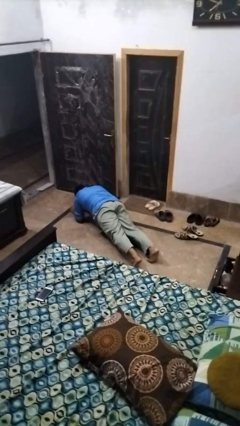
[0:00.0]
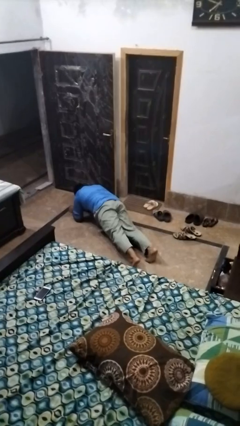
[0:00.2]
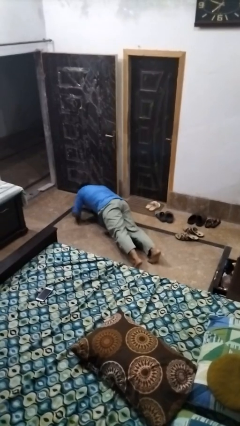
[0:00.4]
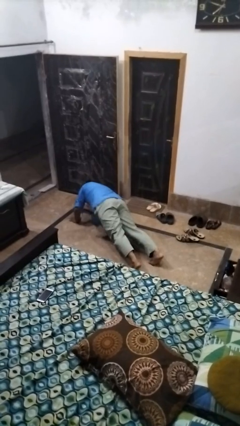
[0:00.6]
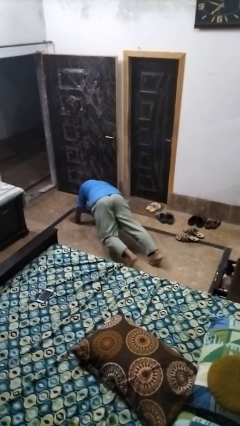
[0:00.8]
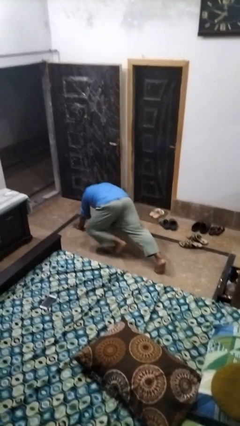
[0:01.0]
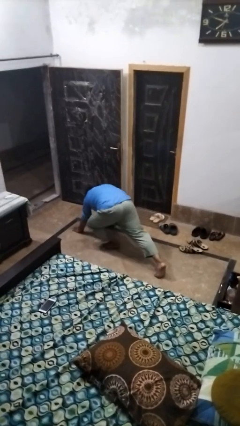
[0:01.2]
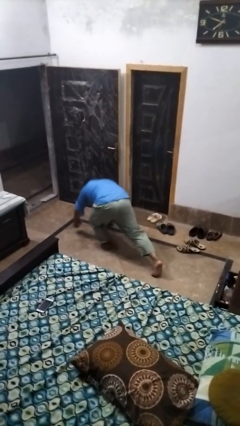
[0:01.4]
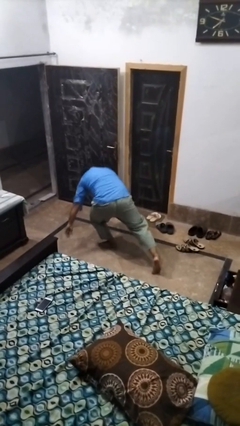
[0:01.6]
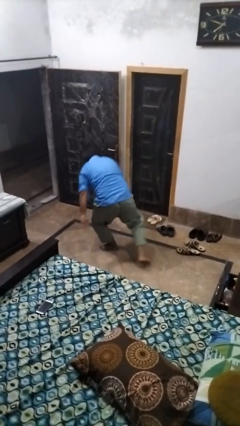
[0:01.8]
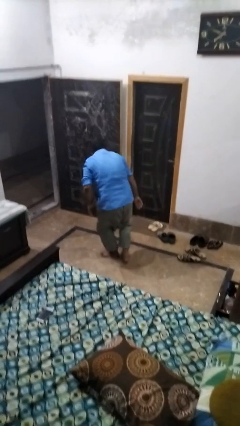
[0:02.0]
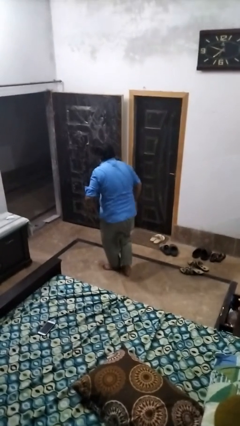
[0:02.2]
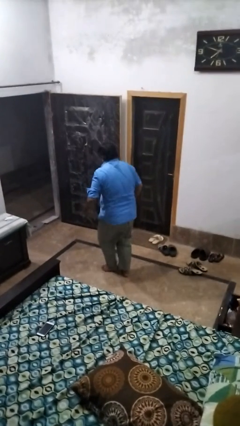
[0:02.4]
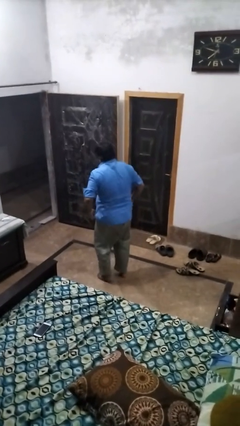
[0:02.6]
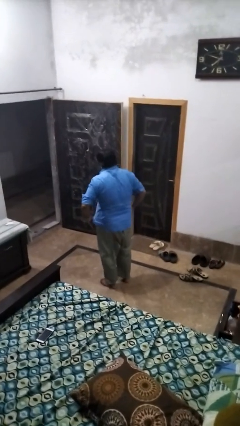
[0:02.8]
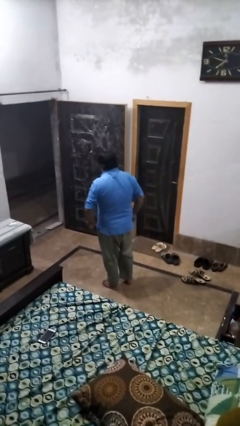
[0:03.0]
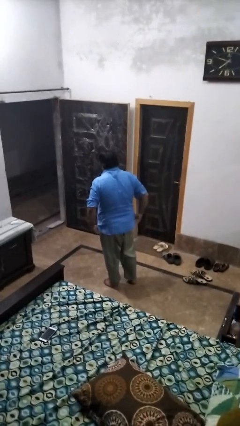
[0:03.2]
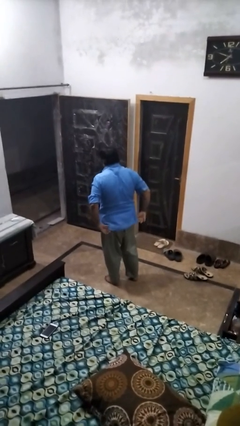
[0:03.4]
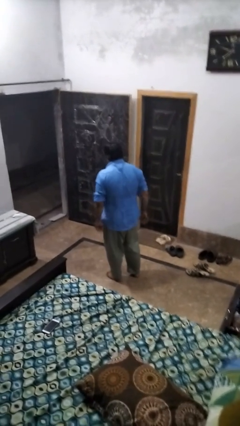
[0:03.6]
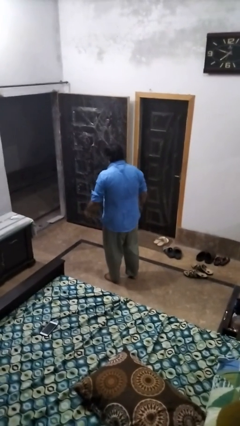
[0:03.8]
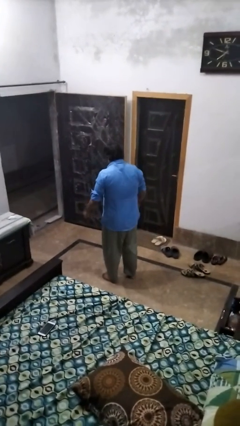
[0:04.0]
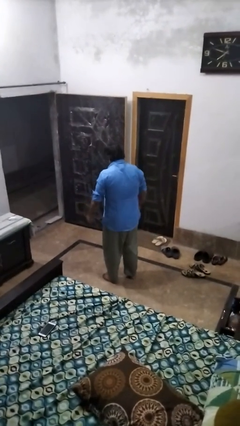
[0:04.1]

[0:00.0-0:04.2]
person stands up from floor

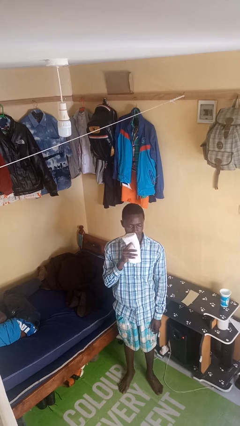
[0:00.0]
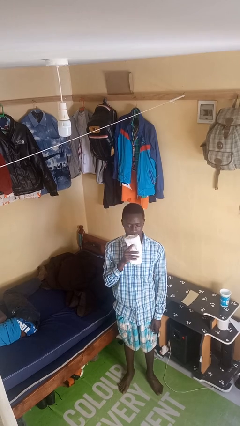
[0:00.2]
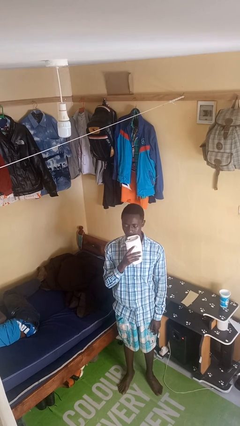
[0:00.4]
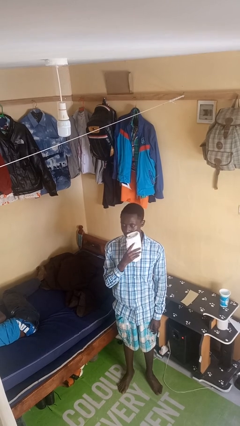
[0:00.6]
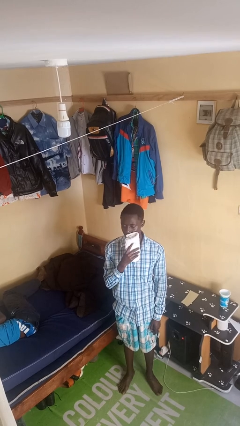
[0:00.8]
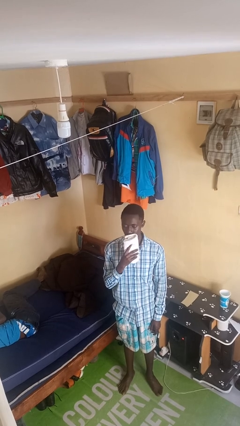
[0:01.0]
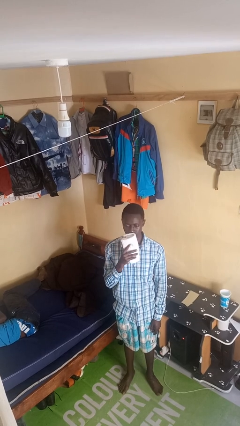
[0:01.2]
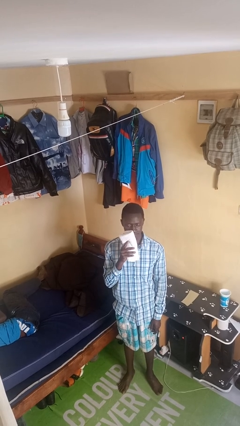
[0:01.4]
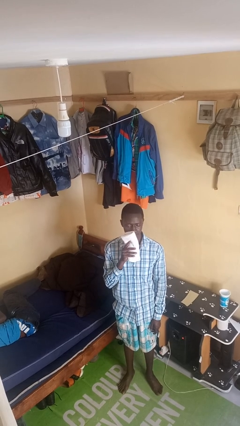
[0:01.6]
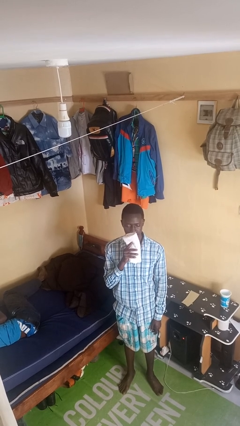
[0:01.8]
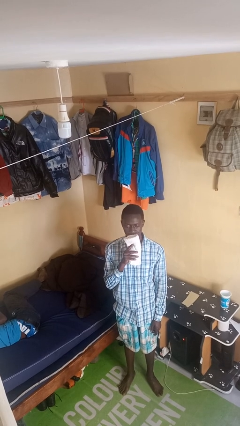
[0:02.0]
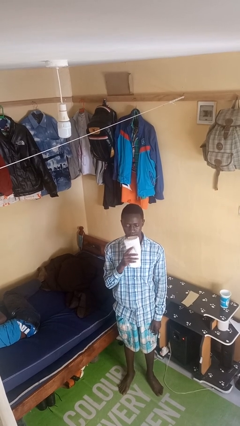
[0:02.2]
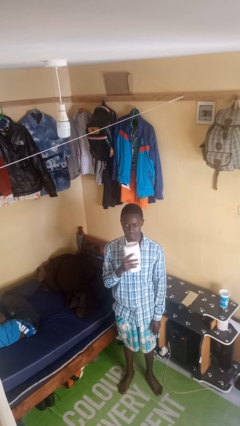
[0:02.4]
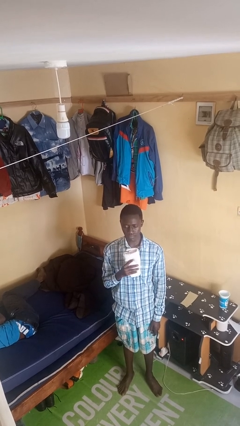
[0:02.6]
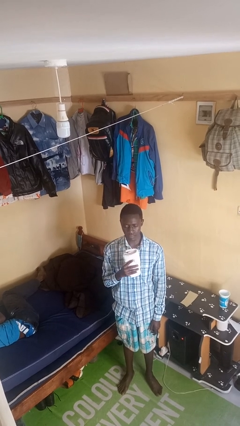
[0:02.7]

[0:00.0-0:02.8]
person wipes mouth with napkin

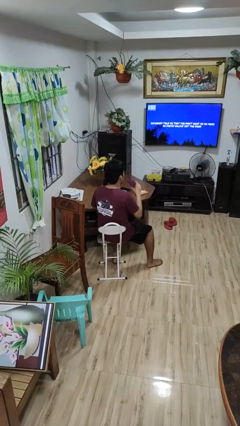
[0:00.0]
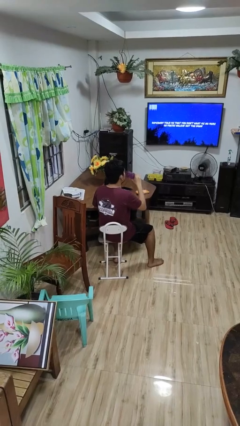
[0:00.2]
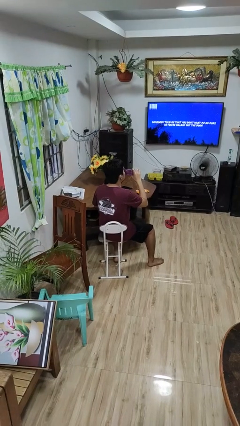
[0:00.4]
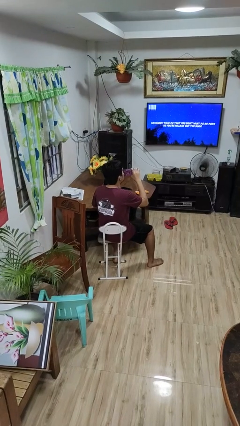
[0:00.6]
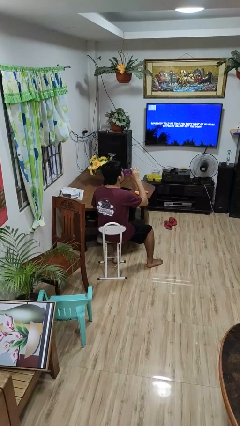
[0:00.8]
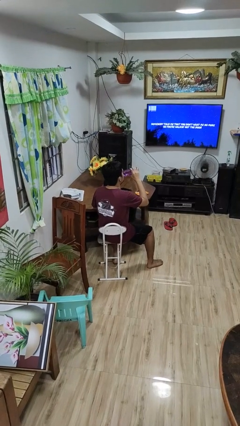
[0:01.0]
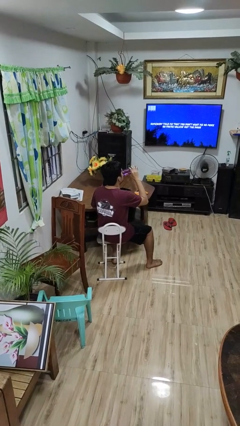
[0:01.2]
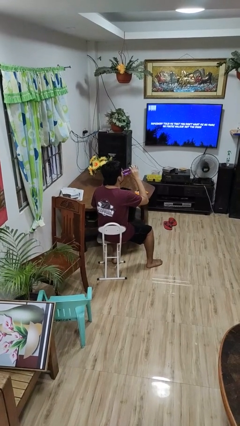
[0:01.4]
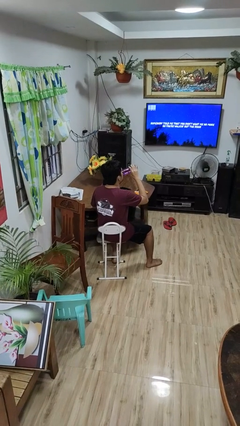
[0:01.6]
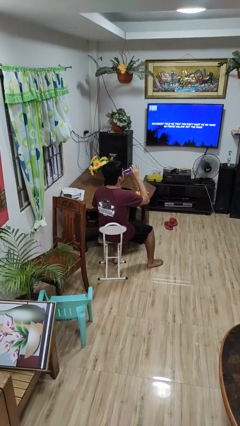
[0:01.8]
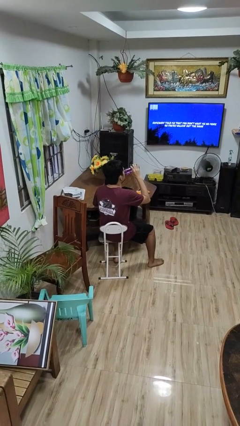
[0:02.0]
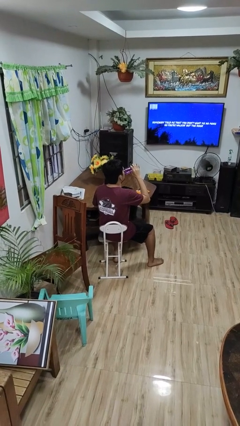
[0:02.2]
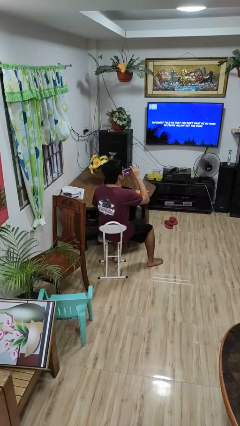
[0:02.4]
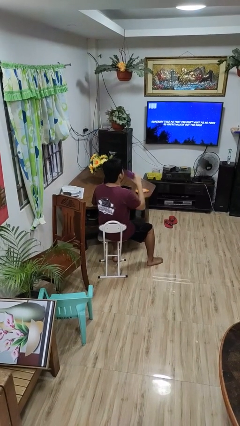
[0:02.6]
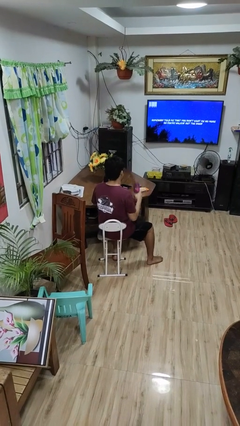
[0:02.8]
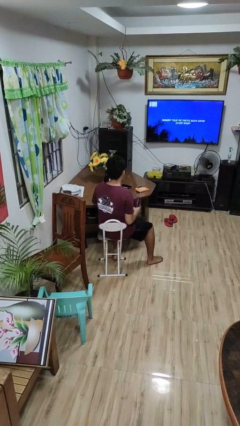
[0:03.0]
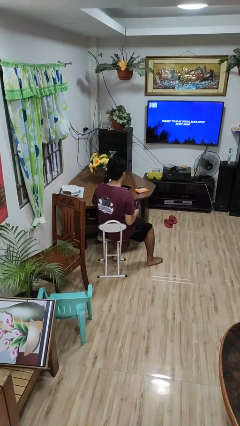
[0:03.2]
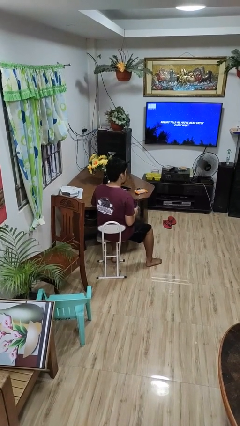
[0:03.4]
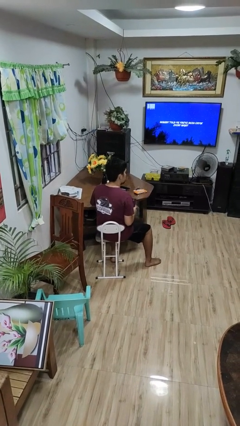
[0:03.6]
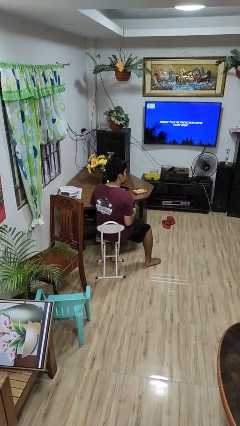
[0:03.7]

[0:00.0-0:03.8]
person drinks from bottle

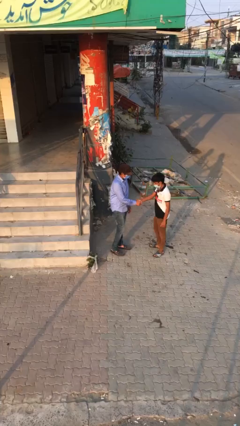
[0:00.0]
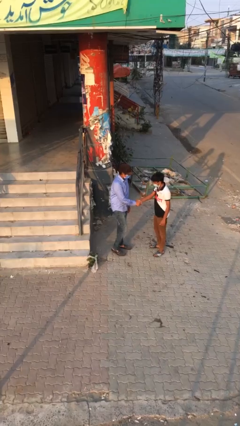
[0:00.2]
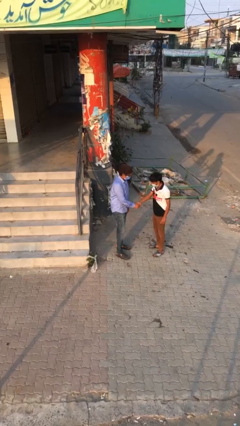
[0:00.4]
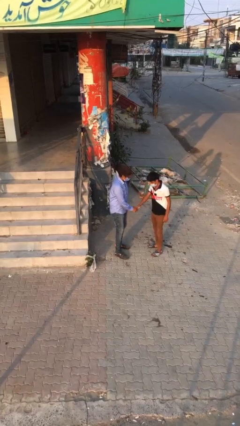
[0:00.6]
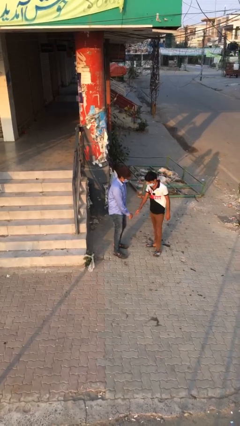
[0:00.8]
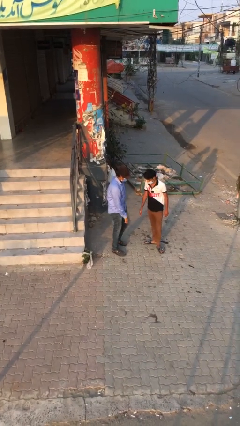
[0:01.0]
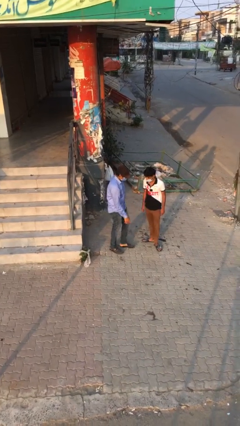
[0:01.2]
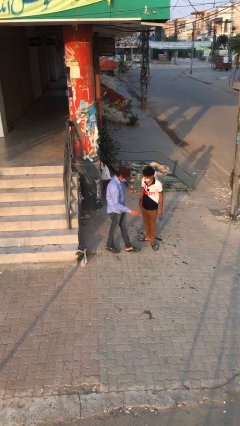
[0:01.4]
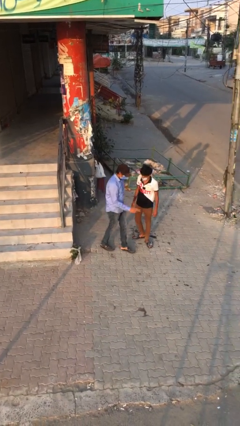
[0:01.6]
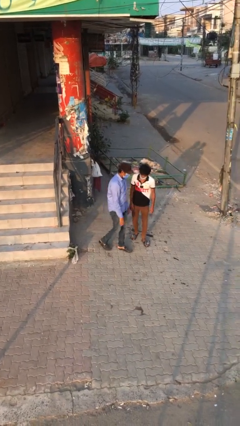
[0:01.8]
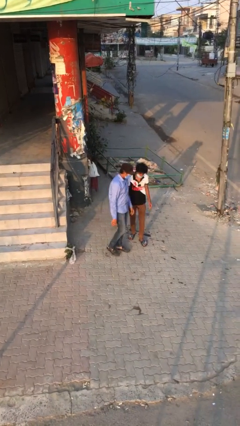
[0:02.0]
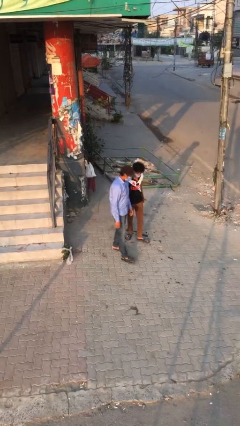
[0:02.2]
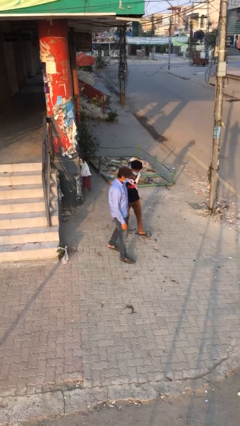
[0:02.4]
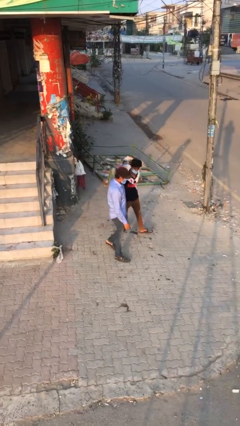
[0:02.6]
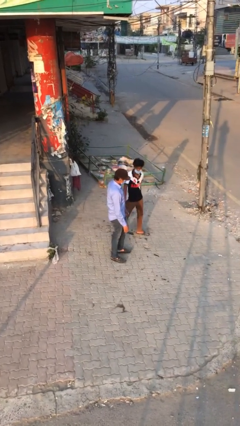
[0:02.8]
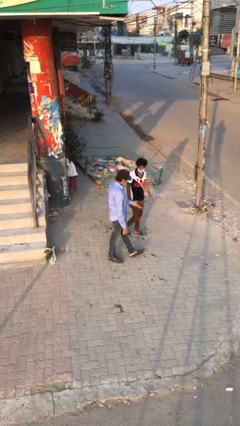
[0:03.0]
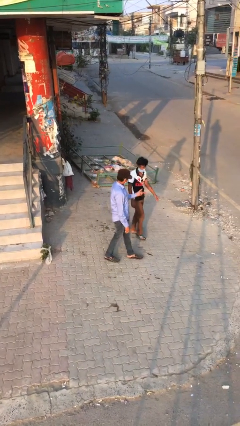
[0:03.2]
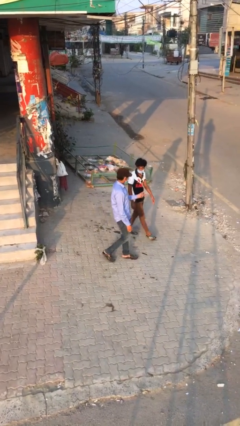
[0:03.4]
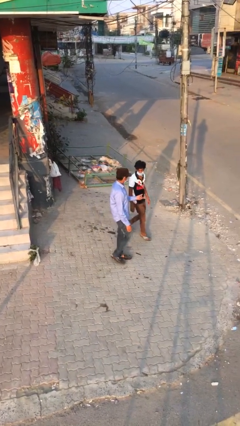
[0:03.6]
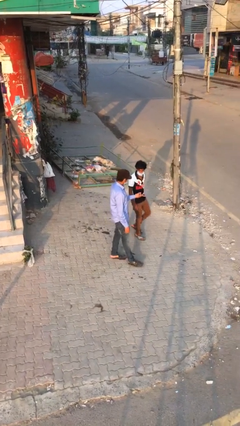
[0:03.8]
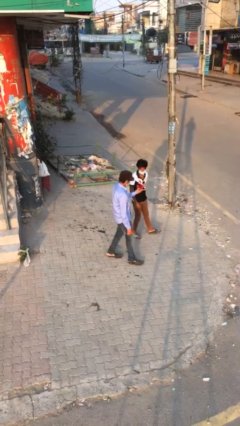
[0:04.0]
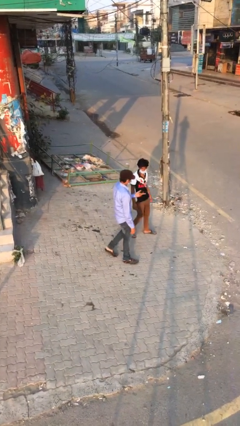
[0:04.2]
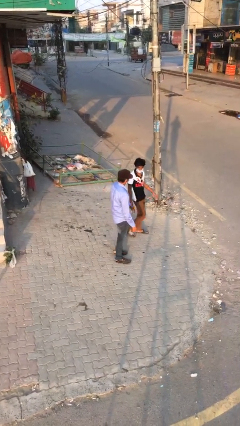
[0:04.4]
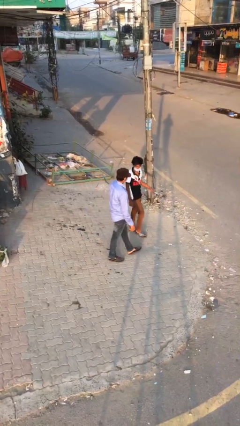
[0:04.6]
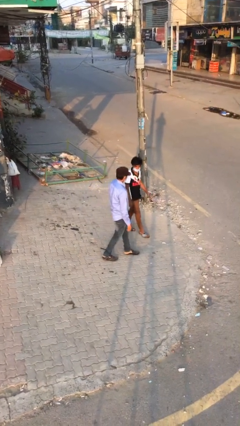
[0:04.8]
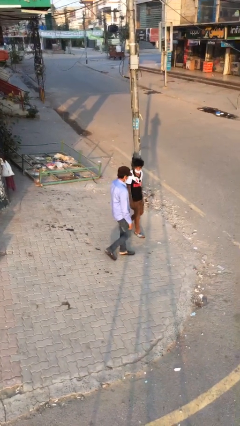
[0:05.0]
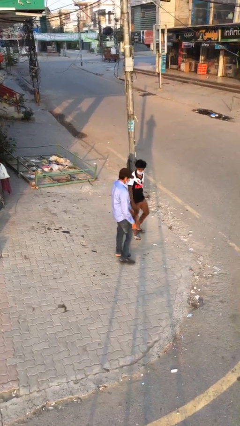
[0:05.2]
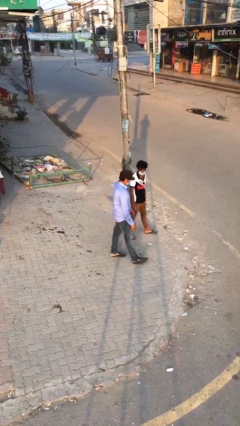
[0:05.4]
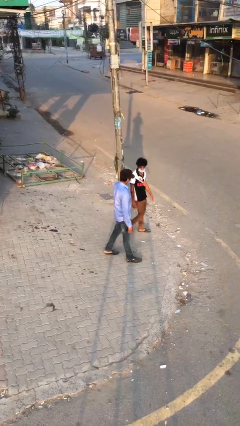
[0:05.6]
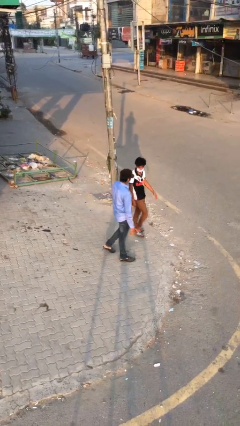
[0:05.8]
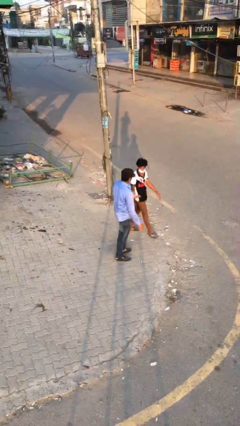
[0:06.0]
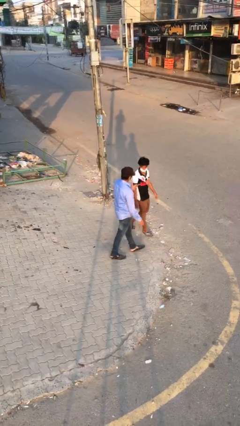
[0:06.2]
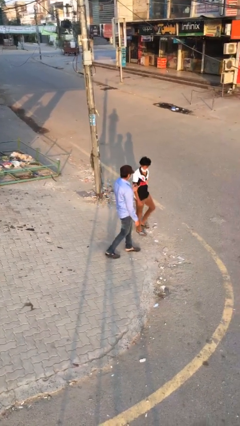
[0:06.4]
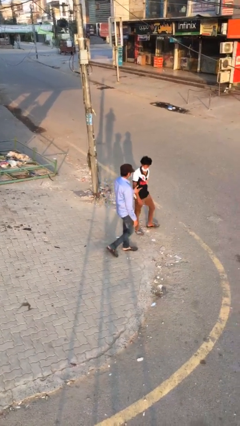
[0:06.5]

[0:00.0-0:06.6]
person talks to person

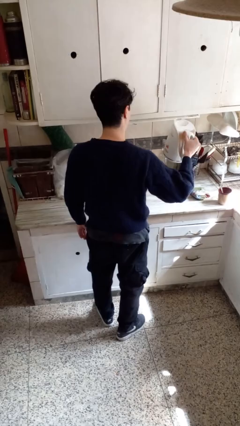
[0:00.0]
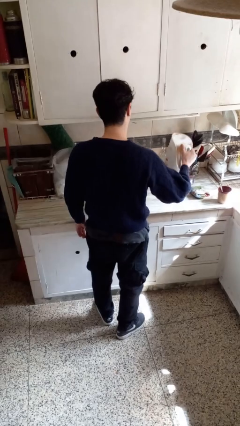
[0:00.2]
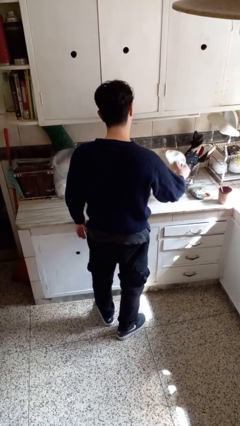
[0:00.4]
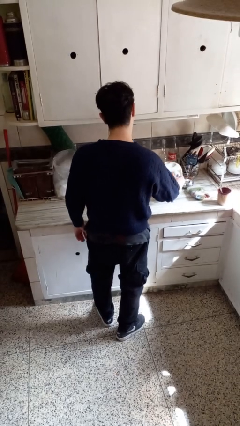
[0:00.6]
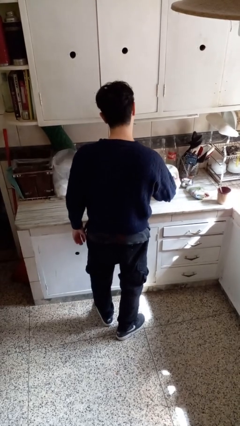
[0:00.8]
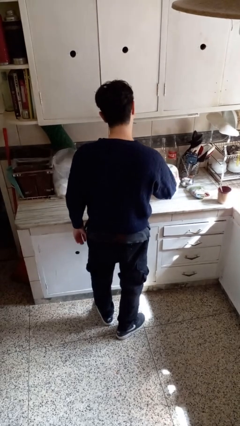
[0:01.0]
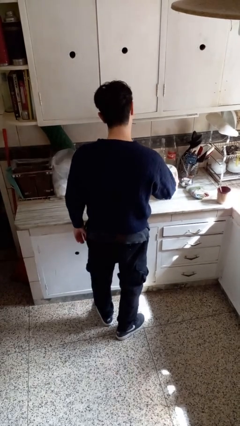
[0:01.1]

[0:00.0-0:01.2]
person puts down object on countertop
